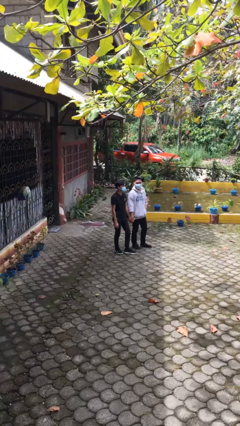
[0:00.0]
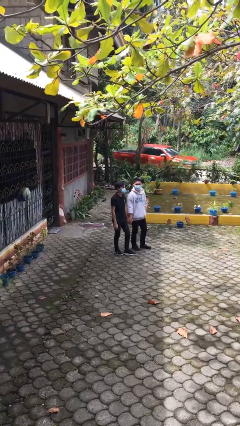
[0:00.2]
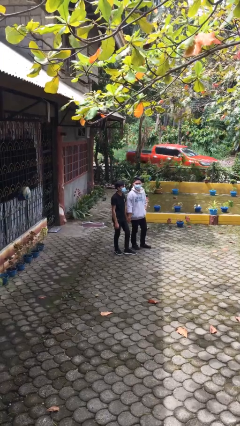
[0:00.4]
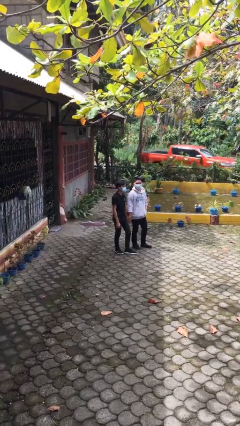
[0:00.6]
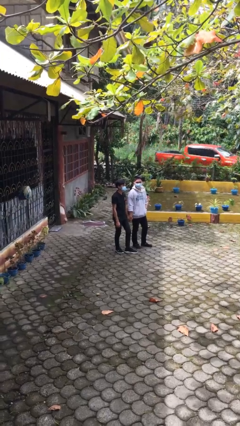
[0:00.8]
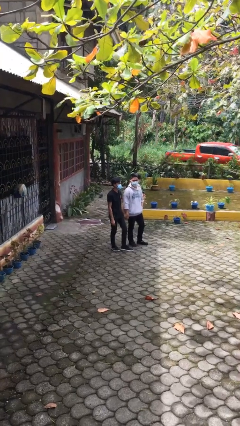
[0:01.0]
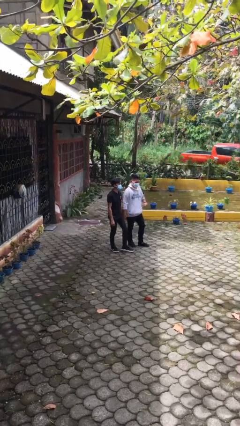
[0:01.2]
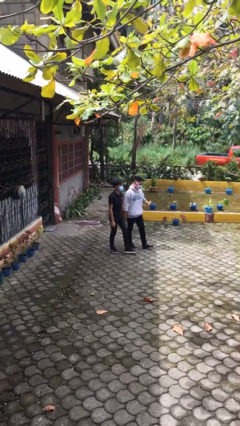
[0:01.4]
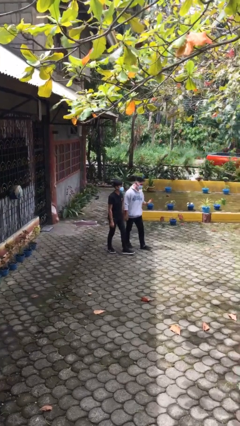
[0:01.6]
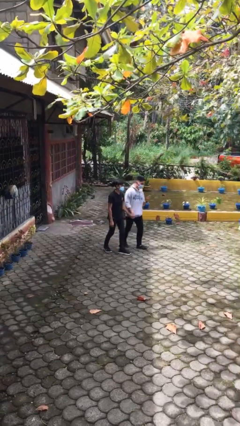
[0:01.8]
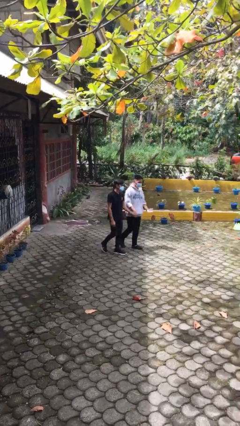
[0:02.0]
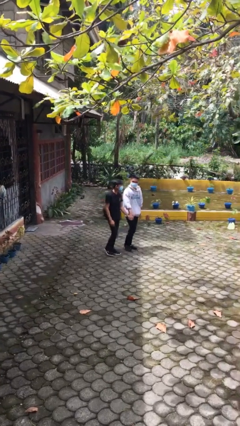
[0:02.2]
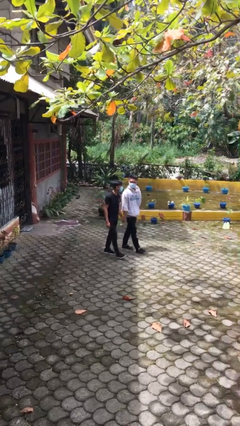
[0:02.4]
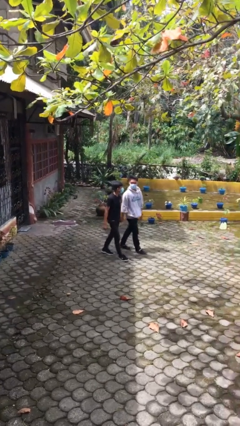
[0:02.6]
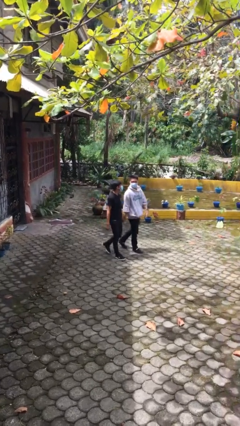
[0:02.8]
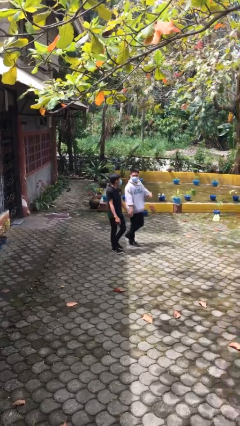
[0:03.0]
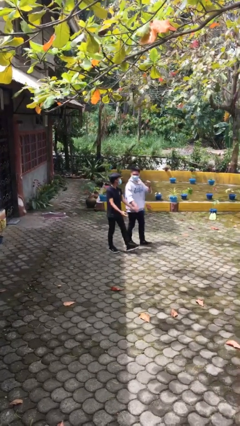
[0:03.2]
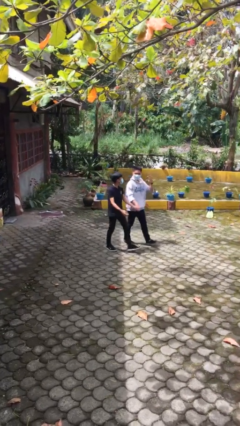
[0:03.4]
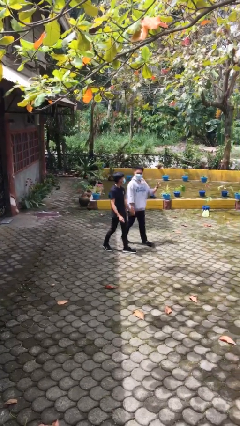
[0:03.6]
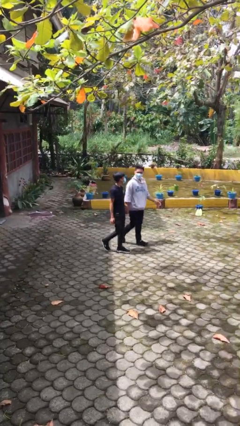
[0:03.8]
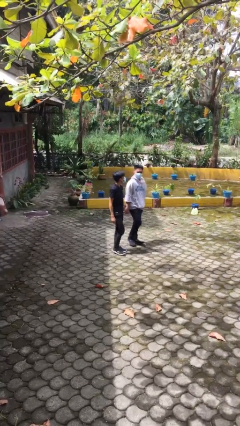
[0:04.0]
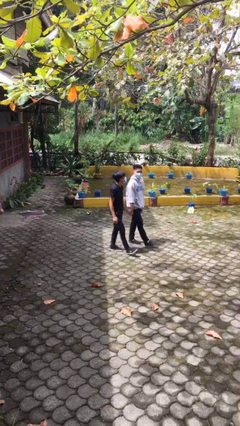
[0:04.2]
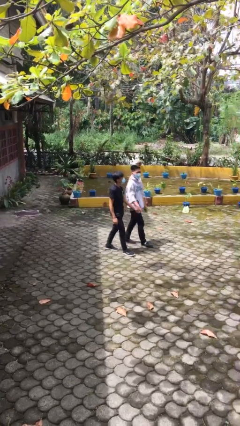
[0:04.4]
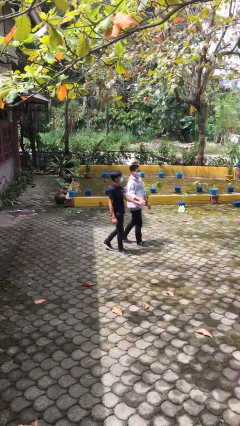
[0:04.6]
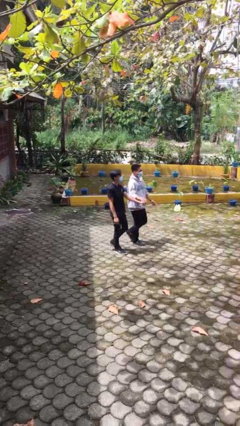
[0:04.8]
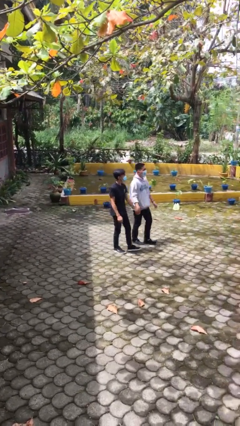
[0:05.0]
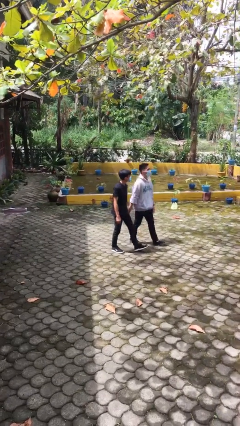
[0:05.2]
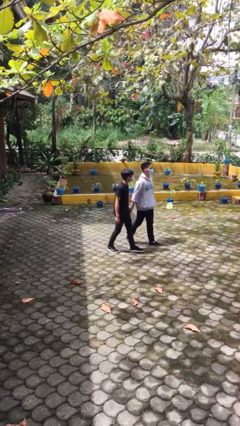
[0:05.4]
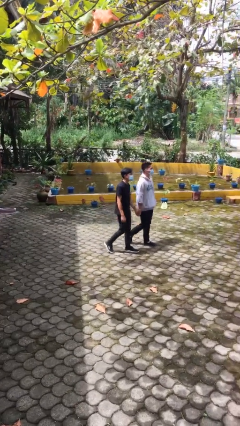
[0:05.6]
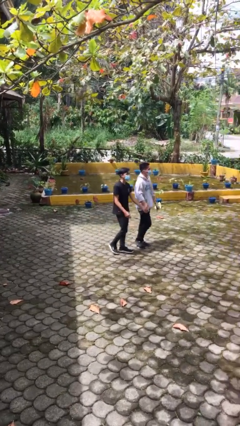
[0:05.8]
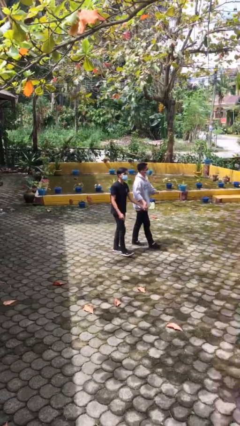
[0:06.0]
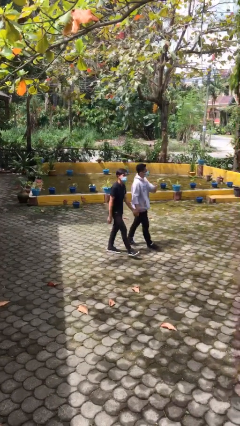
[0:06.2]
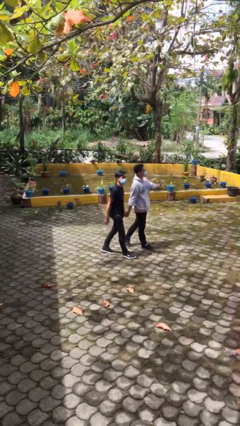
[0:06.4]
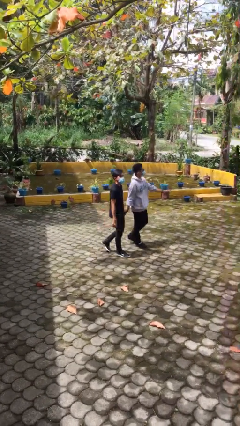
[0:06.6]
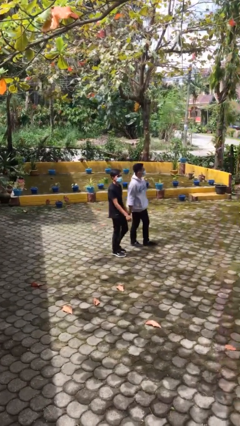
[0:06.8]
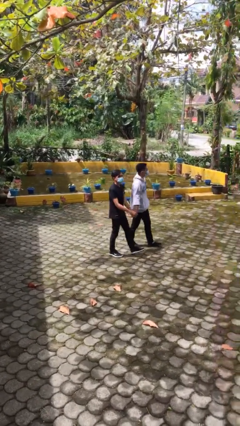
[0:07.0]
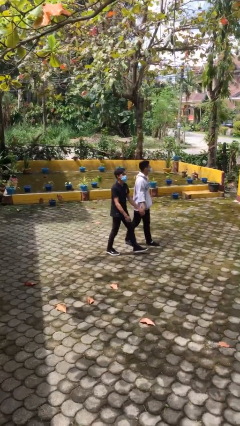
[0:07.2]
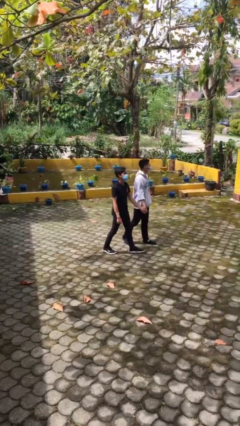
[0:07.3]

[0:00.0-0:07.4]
person holds hand

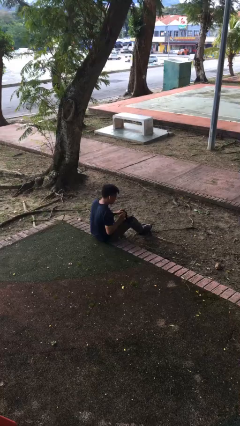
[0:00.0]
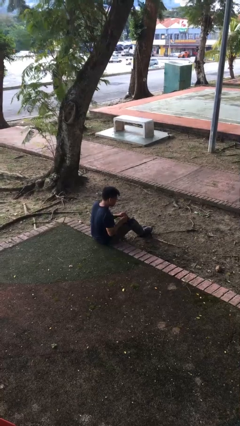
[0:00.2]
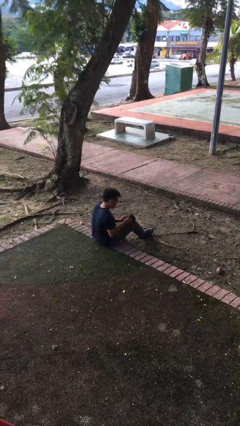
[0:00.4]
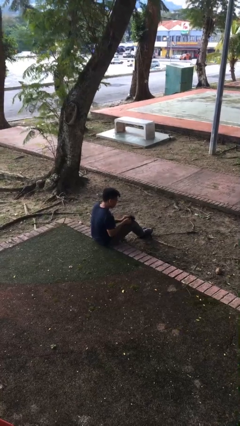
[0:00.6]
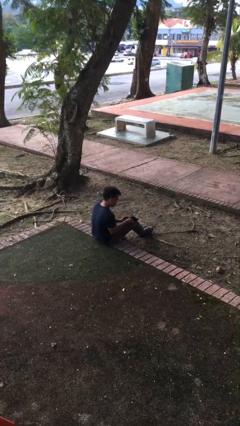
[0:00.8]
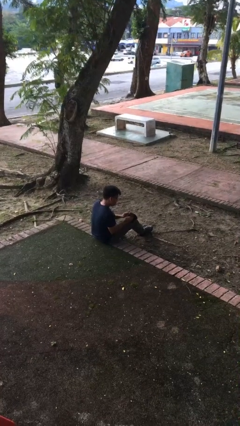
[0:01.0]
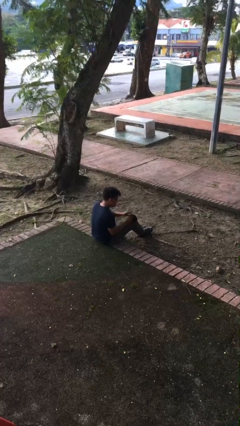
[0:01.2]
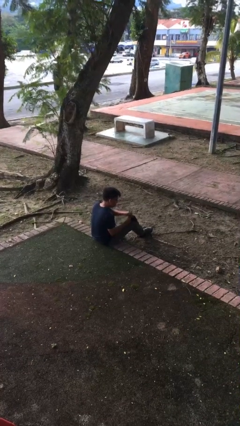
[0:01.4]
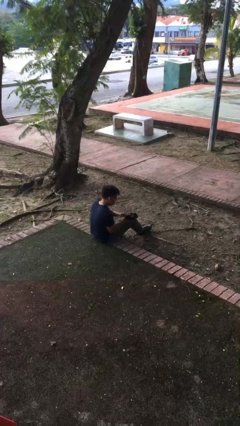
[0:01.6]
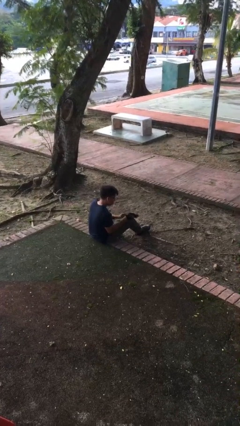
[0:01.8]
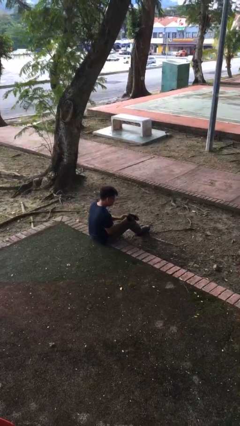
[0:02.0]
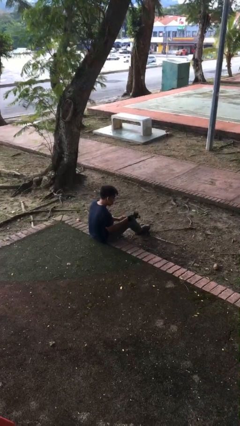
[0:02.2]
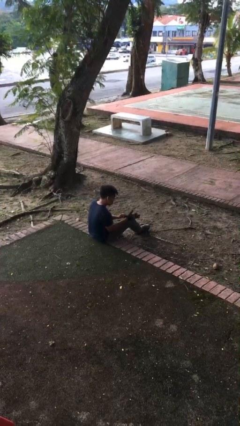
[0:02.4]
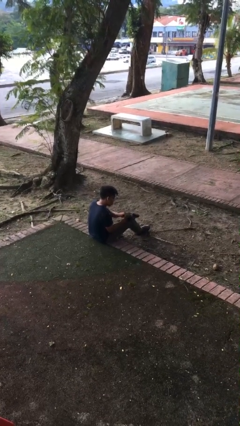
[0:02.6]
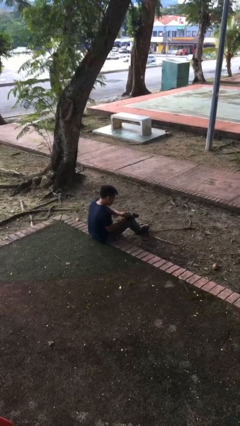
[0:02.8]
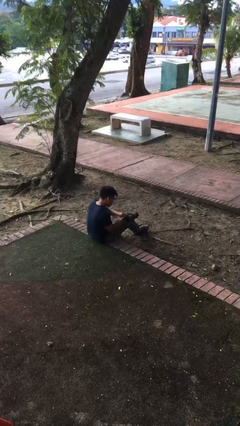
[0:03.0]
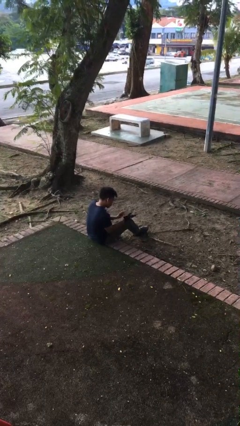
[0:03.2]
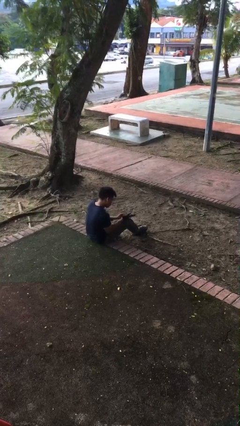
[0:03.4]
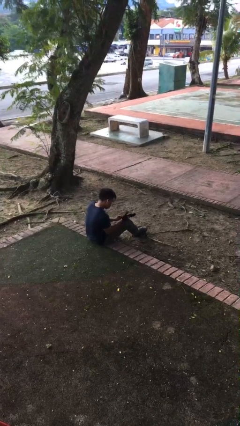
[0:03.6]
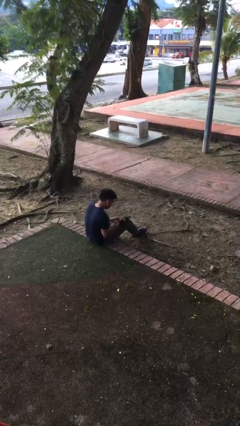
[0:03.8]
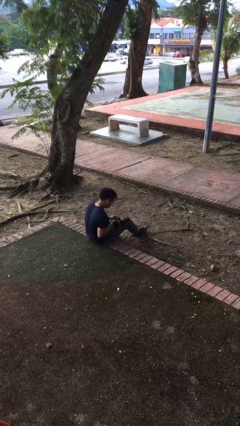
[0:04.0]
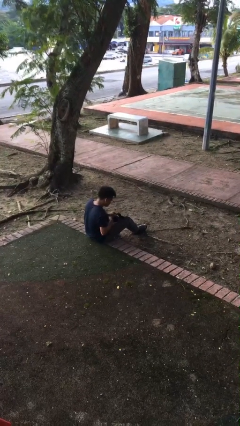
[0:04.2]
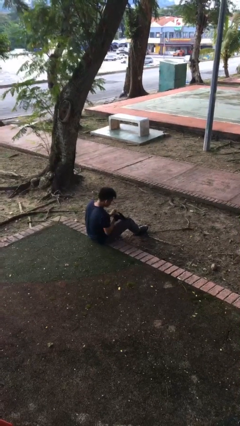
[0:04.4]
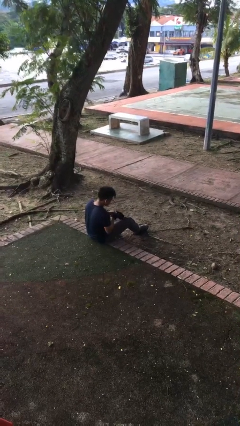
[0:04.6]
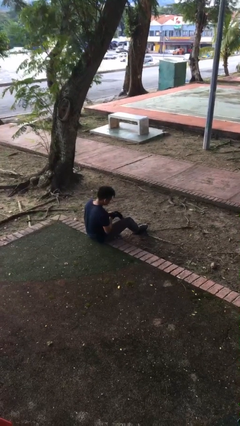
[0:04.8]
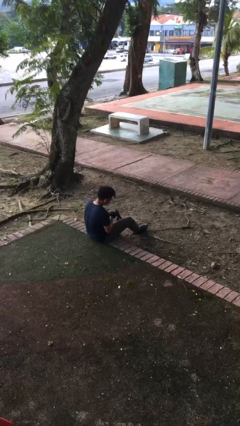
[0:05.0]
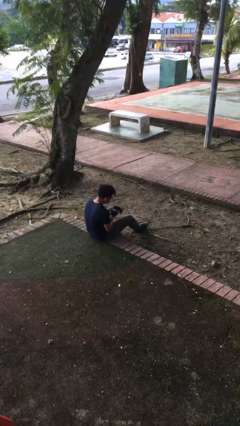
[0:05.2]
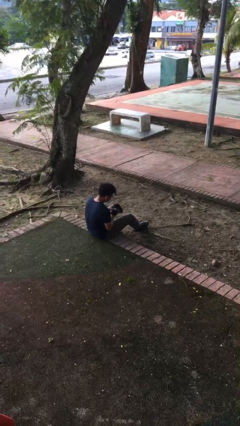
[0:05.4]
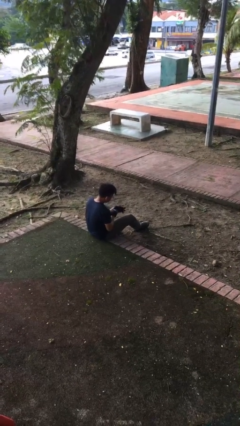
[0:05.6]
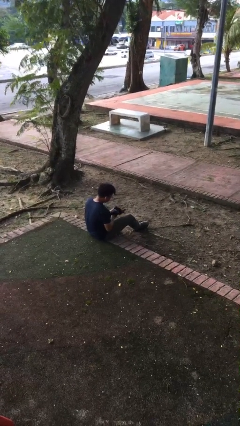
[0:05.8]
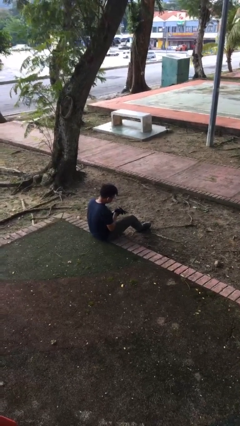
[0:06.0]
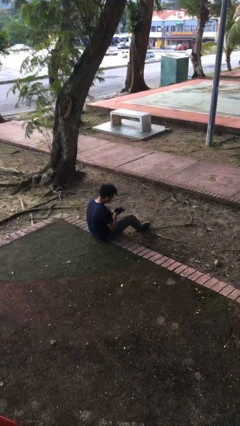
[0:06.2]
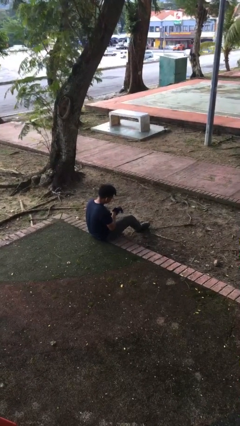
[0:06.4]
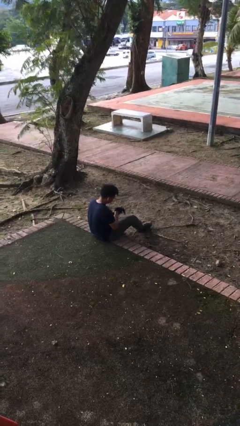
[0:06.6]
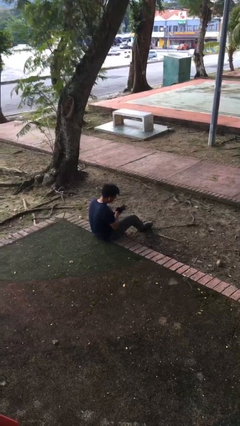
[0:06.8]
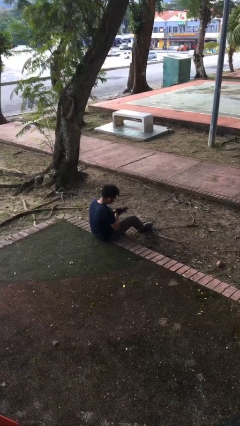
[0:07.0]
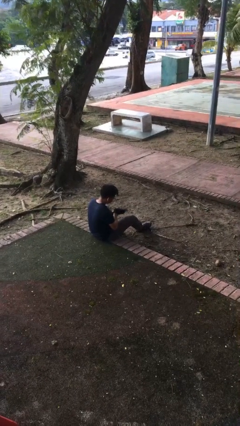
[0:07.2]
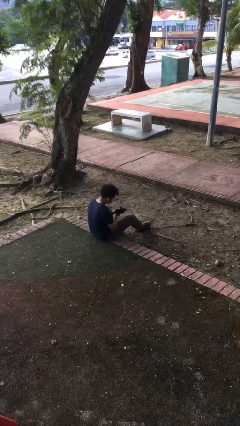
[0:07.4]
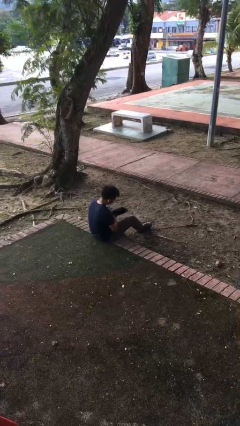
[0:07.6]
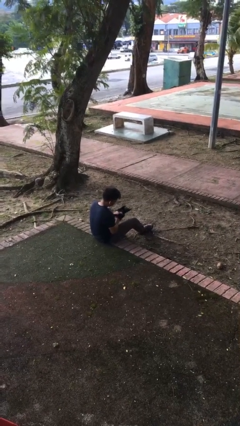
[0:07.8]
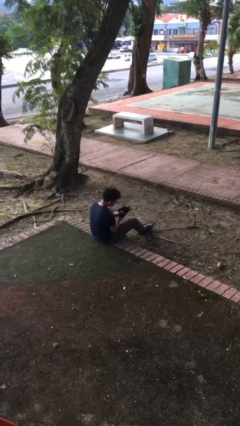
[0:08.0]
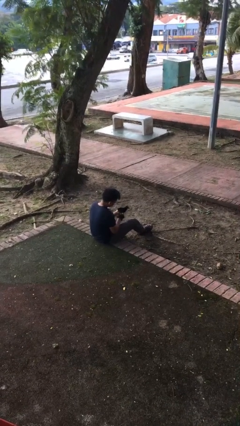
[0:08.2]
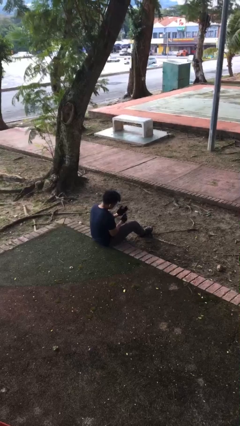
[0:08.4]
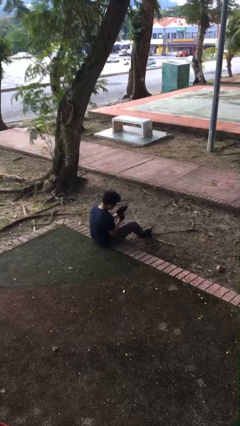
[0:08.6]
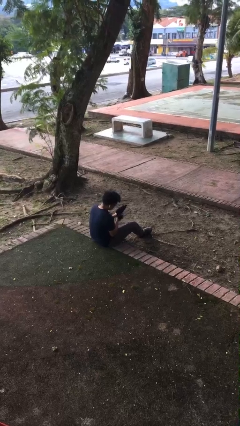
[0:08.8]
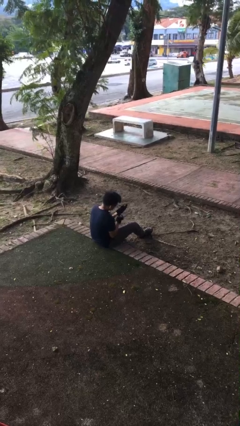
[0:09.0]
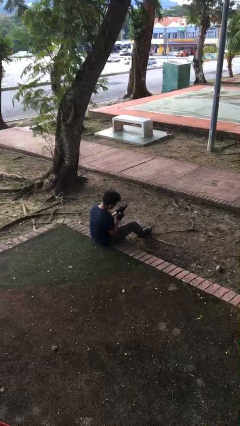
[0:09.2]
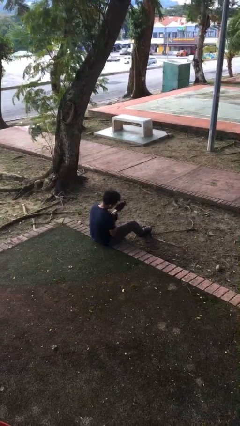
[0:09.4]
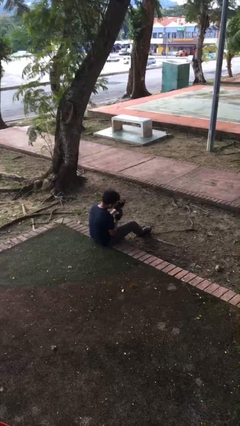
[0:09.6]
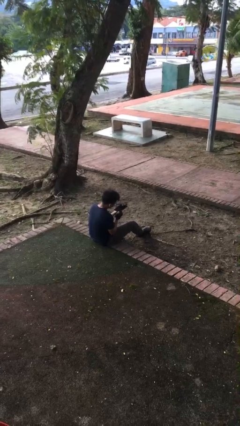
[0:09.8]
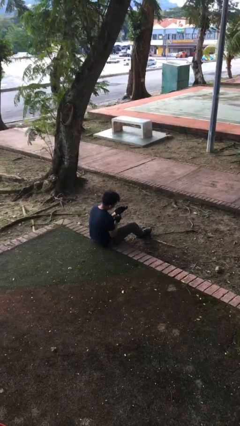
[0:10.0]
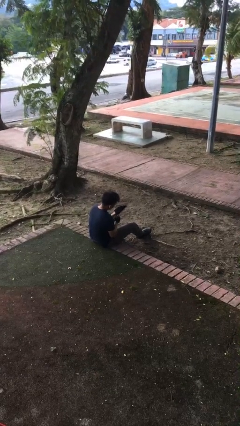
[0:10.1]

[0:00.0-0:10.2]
person puts on gloves

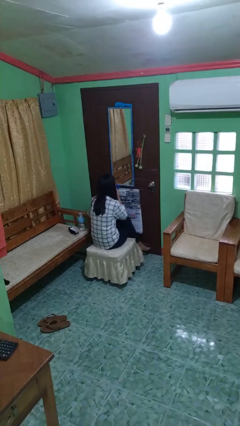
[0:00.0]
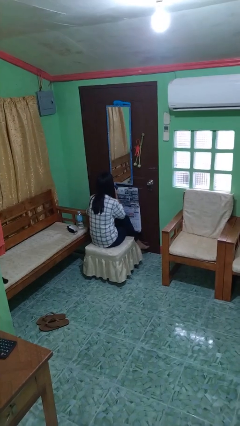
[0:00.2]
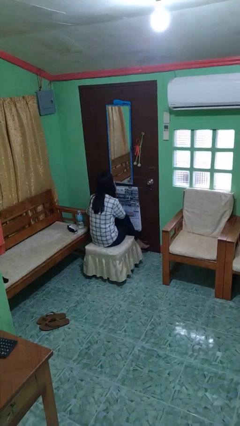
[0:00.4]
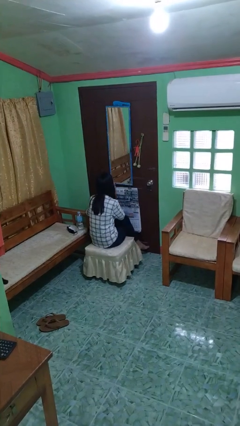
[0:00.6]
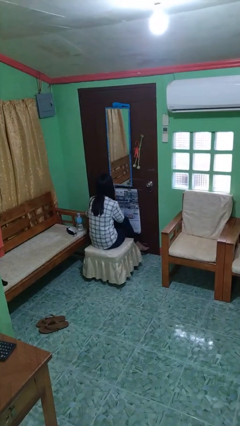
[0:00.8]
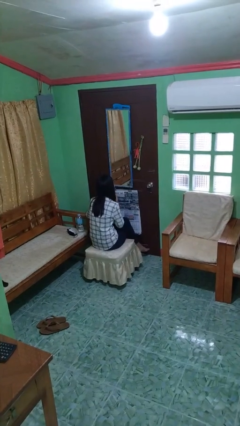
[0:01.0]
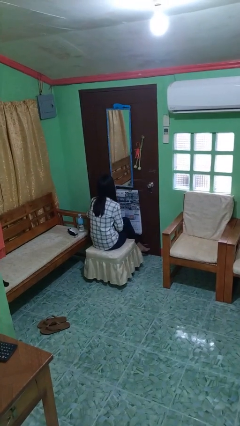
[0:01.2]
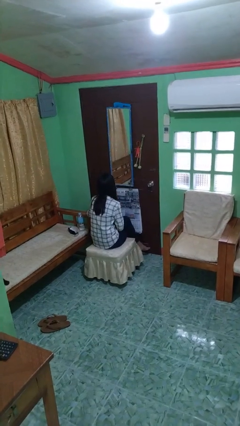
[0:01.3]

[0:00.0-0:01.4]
person wipes mouth with napkin
